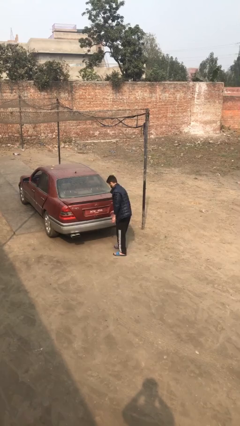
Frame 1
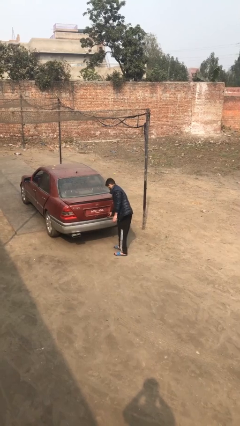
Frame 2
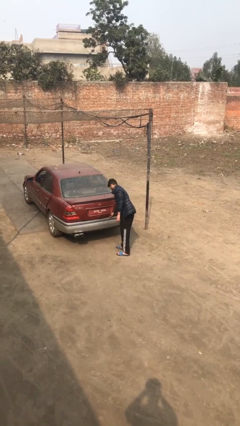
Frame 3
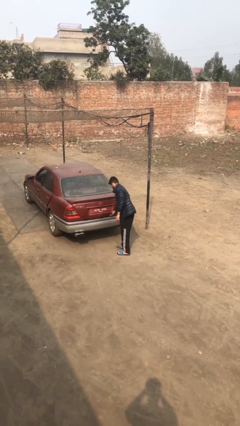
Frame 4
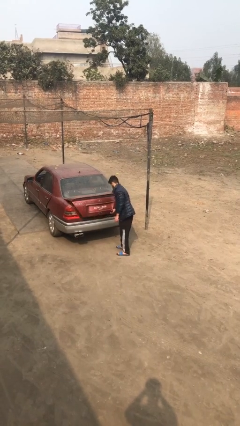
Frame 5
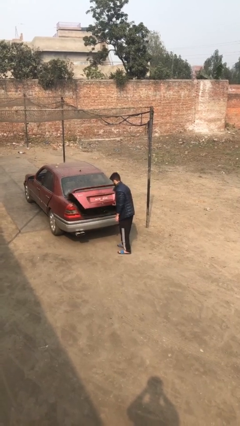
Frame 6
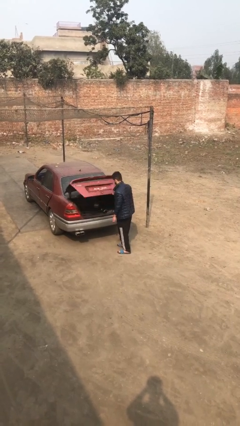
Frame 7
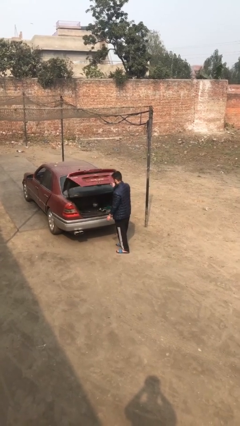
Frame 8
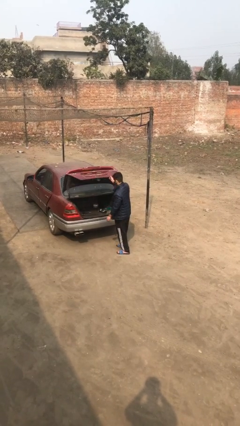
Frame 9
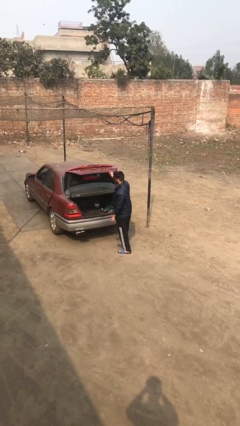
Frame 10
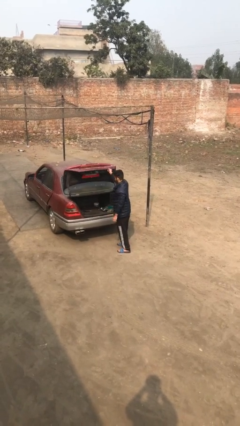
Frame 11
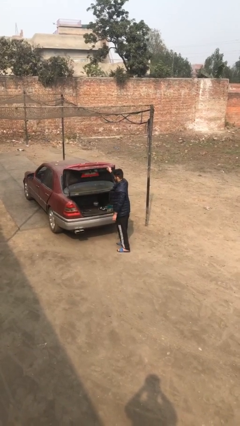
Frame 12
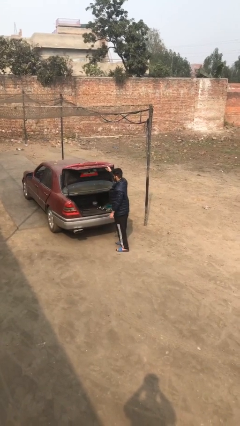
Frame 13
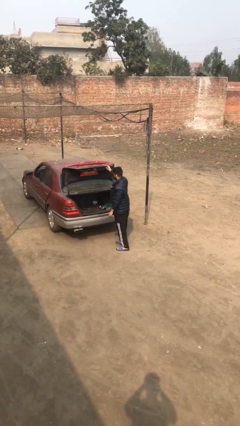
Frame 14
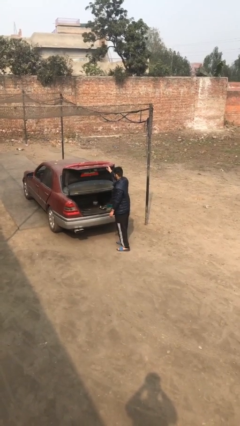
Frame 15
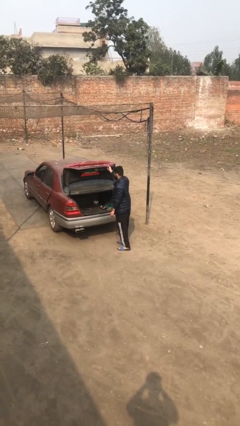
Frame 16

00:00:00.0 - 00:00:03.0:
person opens car trunk

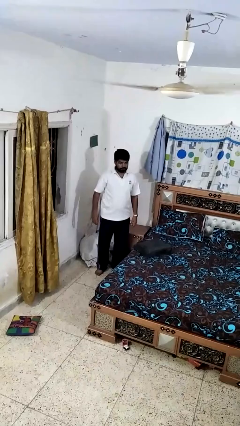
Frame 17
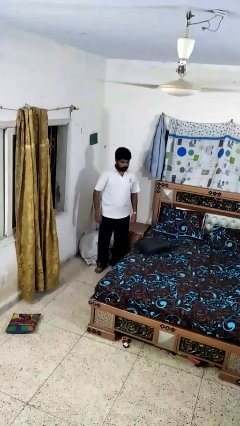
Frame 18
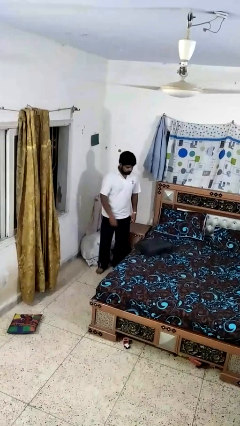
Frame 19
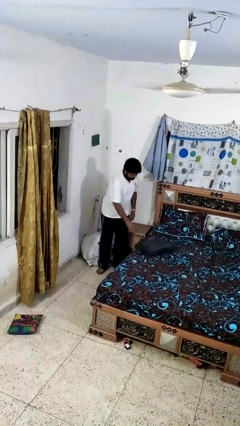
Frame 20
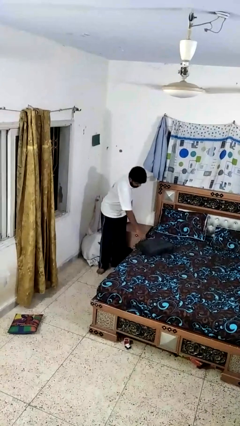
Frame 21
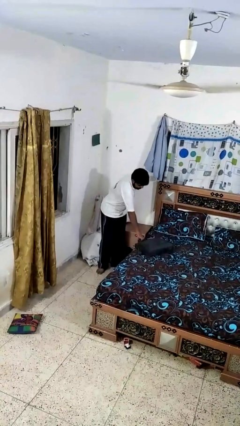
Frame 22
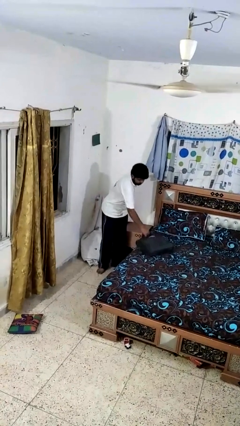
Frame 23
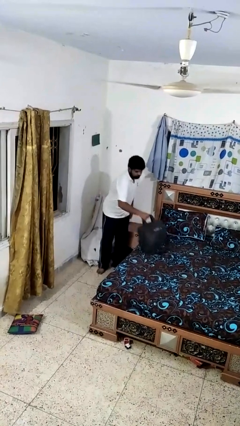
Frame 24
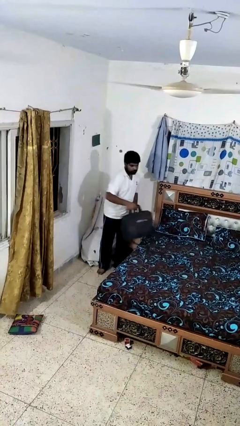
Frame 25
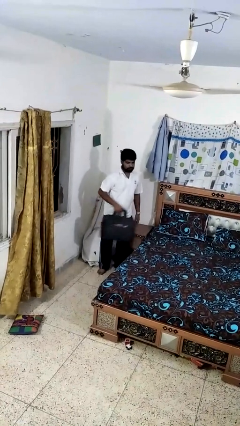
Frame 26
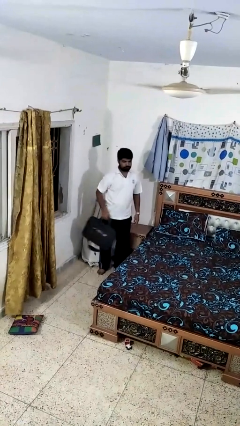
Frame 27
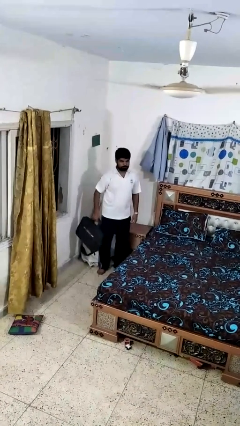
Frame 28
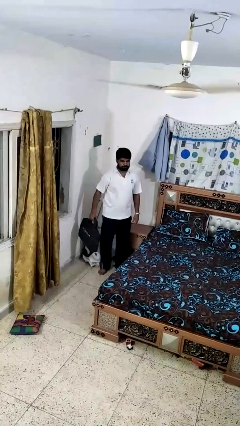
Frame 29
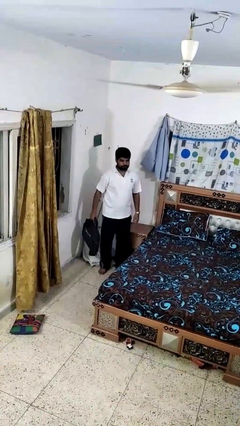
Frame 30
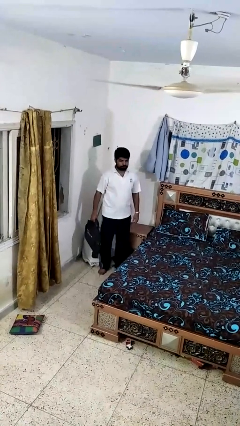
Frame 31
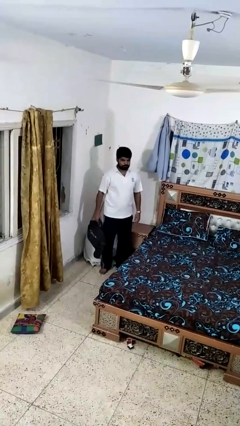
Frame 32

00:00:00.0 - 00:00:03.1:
person picks up object from bed

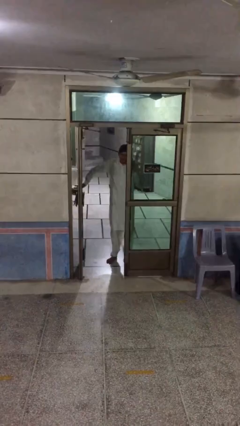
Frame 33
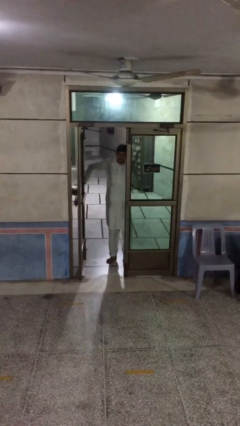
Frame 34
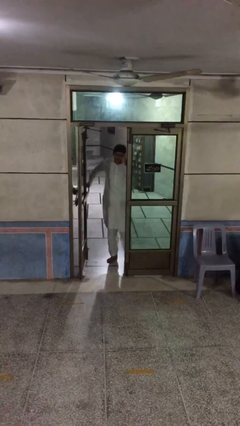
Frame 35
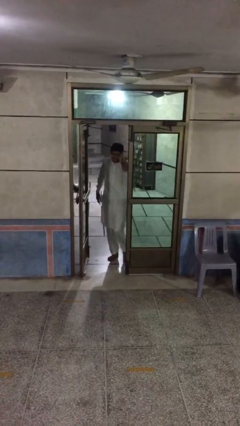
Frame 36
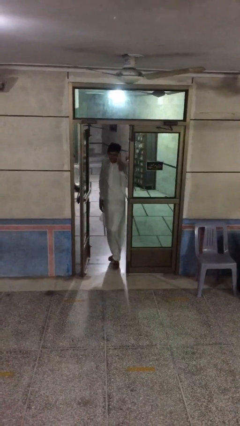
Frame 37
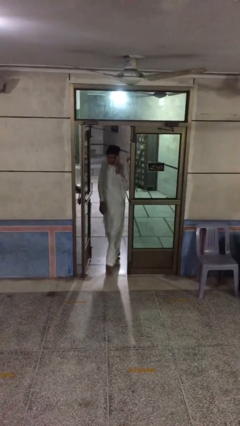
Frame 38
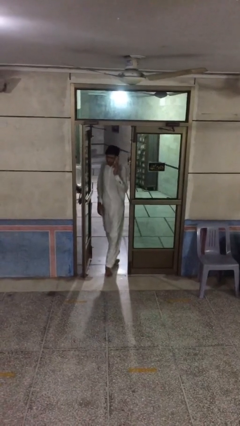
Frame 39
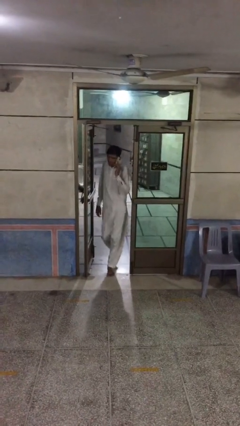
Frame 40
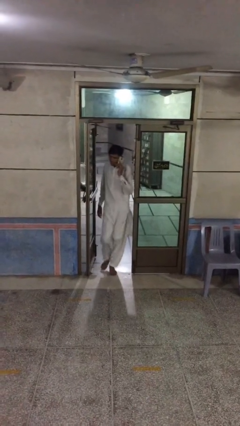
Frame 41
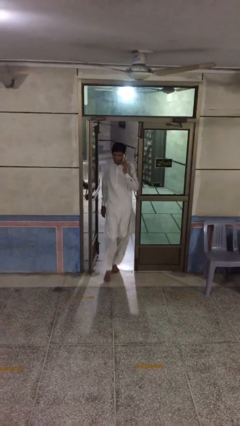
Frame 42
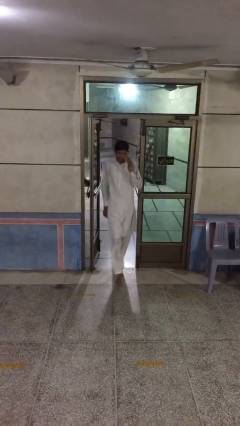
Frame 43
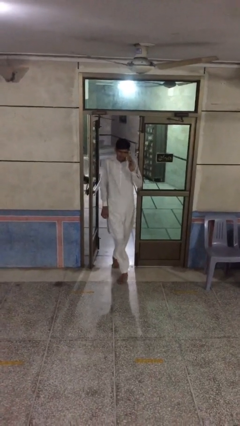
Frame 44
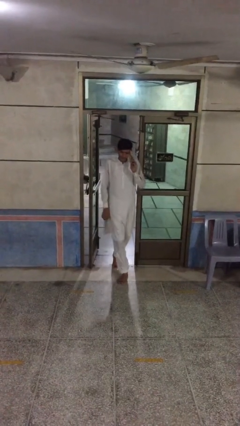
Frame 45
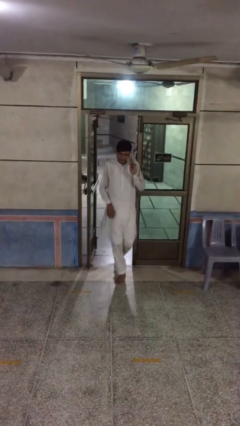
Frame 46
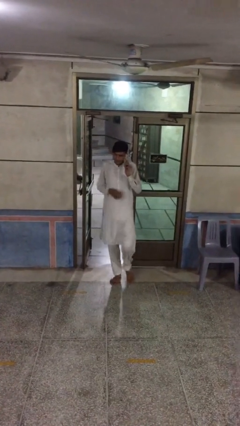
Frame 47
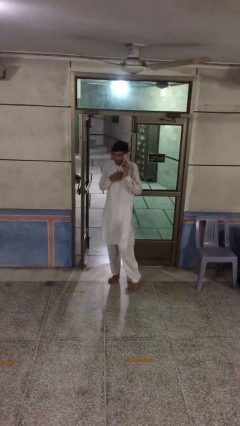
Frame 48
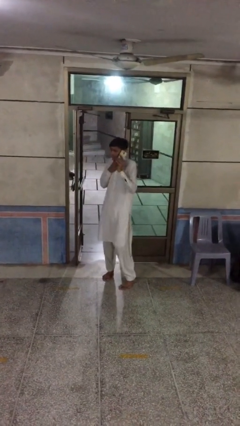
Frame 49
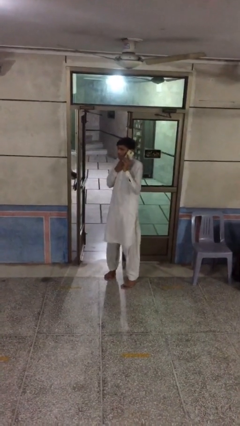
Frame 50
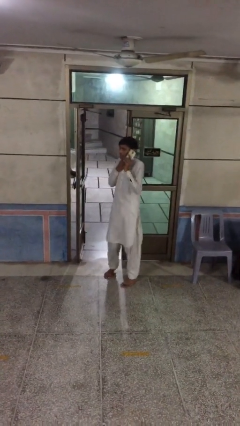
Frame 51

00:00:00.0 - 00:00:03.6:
person enters scene through structure

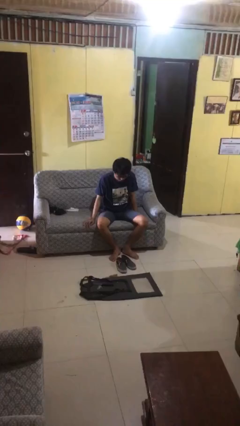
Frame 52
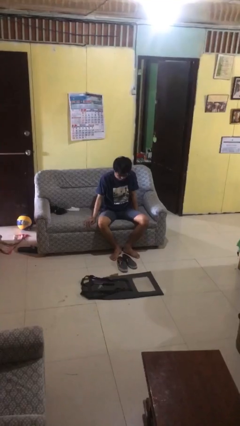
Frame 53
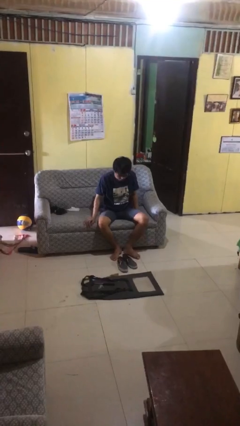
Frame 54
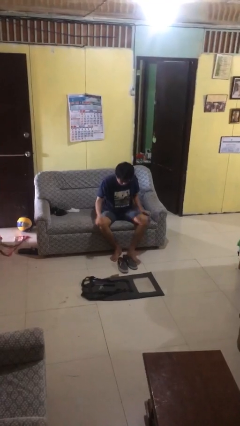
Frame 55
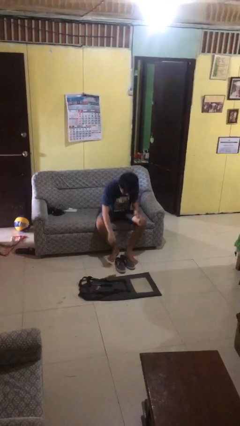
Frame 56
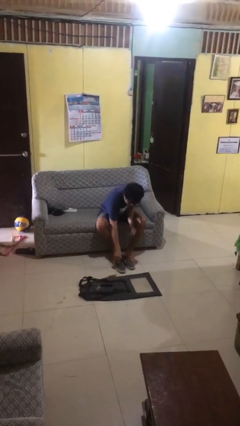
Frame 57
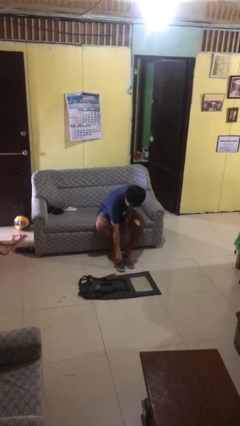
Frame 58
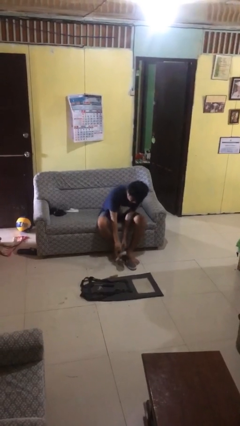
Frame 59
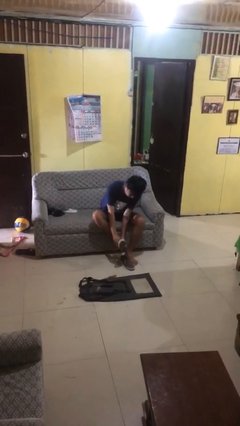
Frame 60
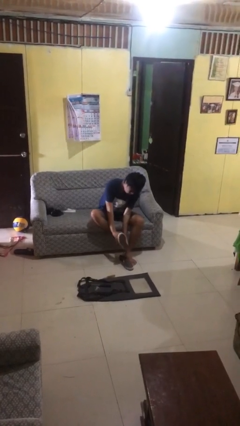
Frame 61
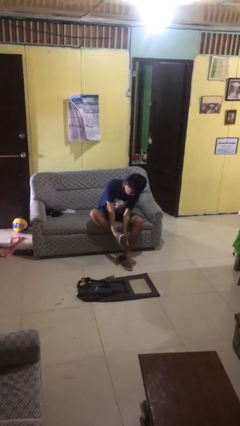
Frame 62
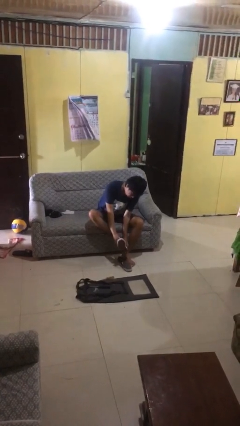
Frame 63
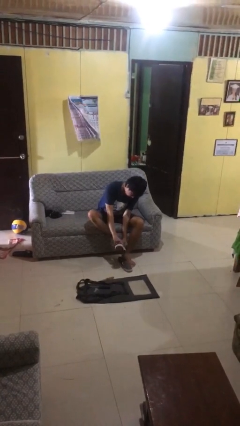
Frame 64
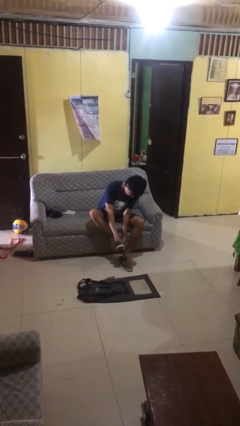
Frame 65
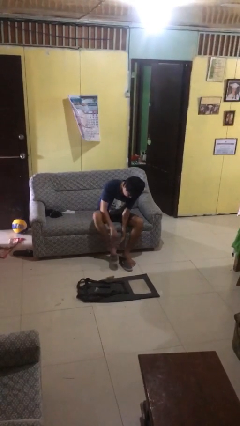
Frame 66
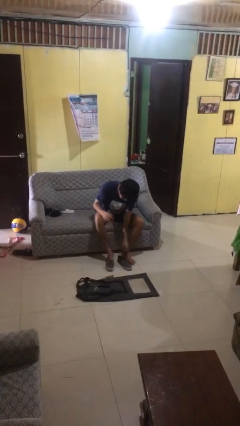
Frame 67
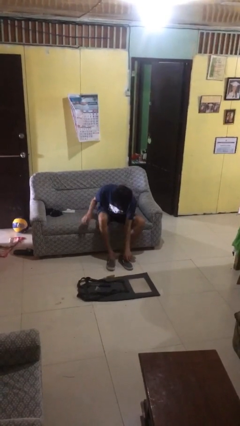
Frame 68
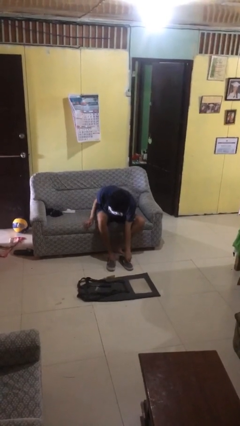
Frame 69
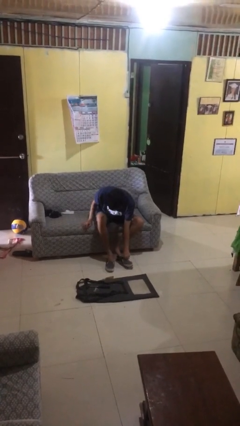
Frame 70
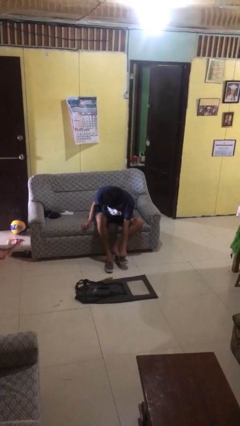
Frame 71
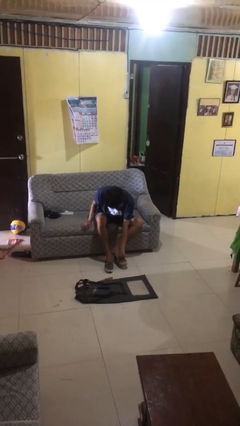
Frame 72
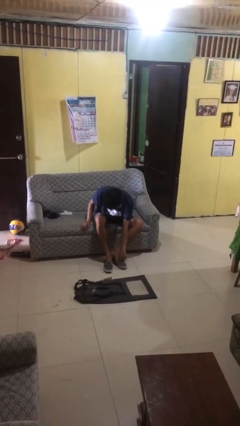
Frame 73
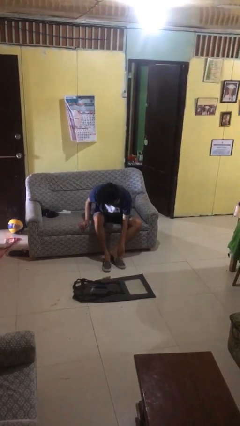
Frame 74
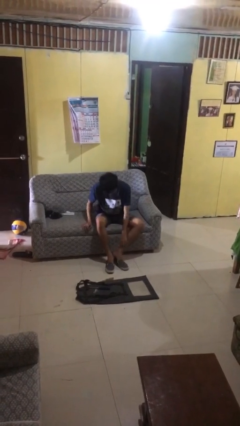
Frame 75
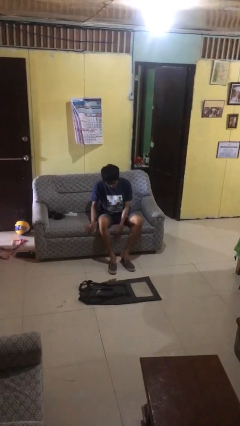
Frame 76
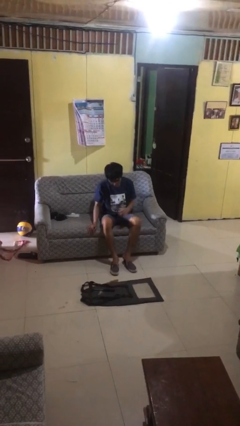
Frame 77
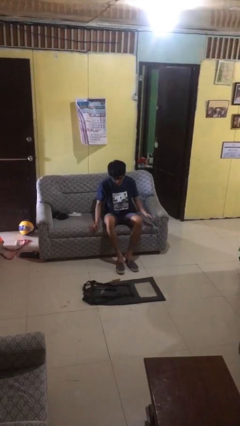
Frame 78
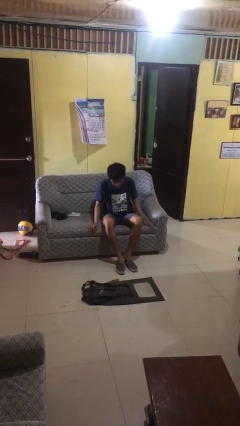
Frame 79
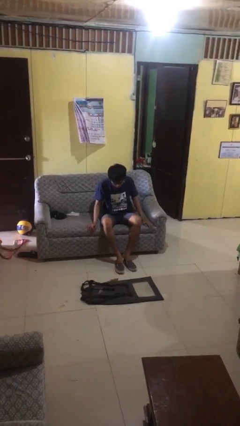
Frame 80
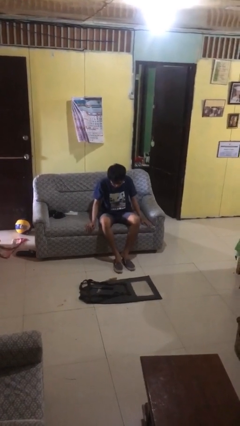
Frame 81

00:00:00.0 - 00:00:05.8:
person puts on shoes

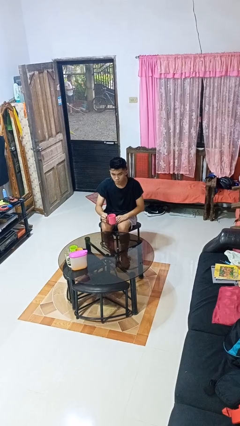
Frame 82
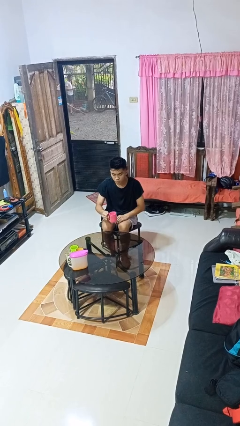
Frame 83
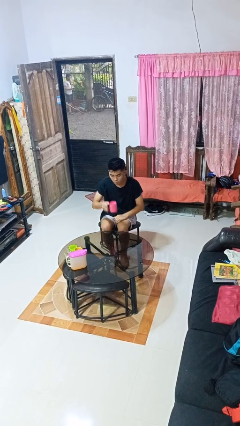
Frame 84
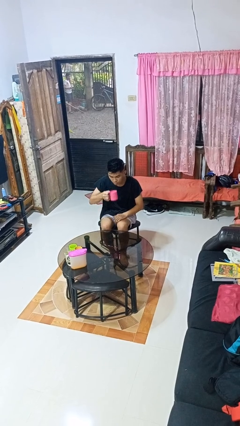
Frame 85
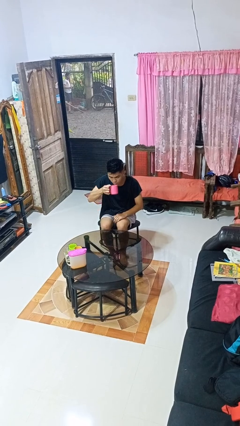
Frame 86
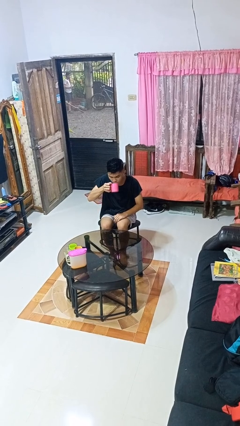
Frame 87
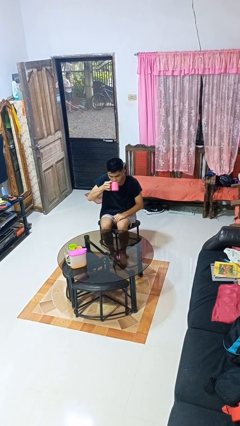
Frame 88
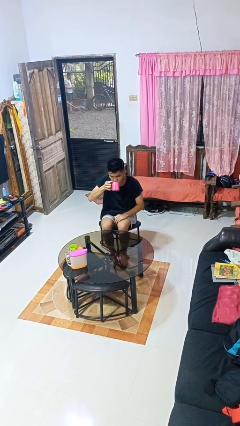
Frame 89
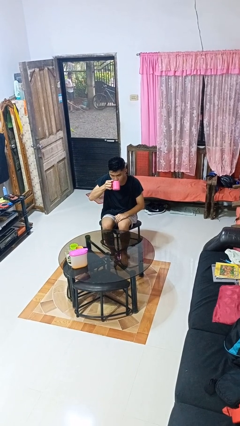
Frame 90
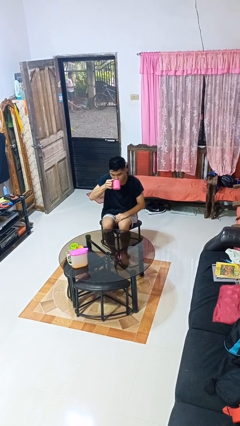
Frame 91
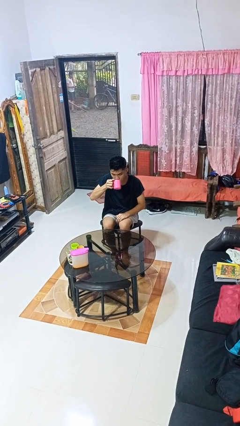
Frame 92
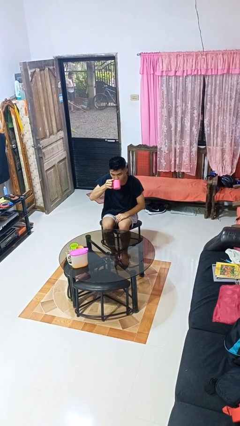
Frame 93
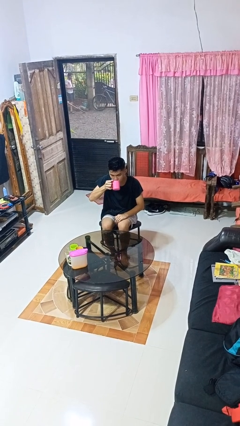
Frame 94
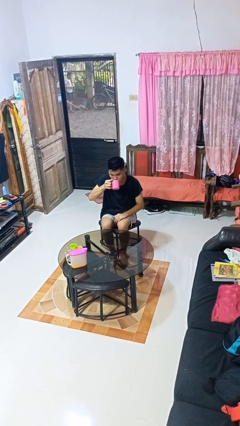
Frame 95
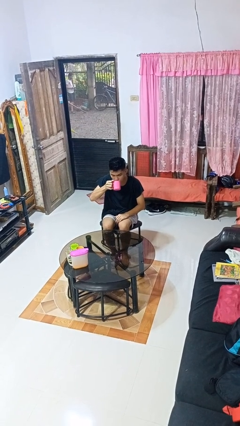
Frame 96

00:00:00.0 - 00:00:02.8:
person drinks from mug
